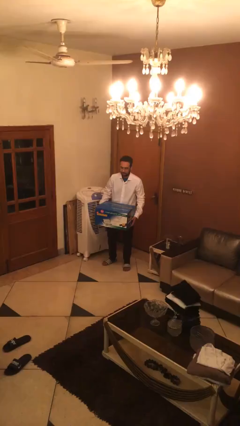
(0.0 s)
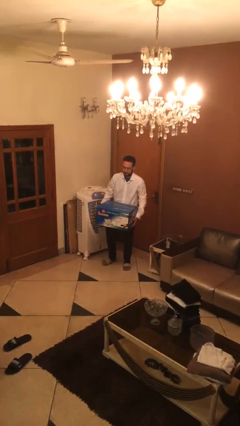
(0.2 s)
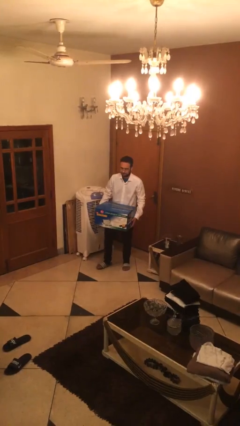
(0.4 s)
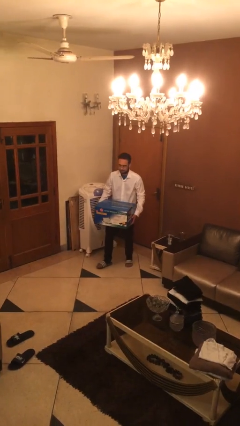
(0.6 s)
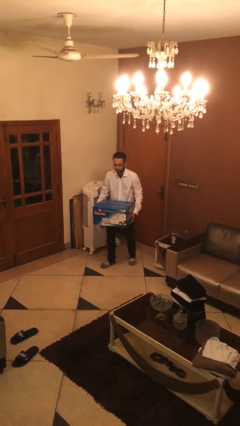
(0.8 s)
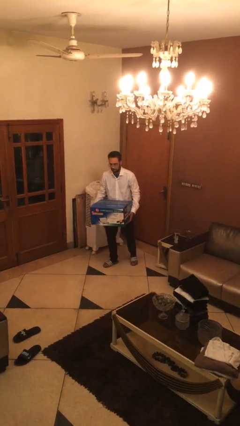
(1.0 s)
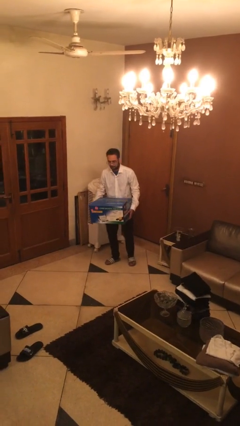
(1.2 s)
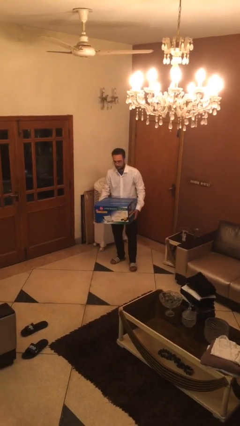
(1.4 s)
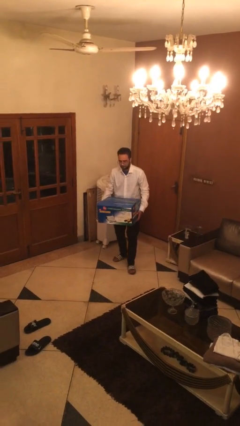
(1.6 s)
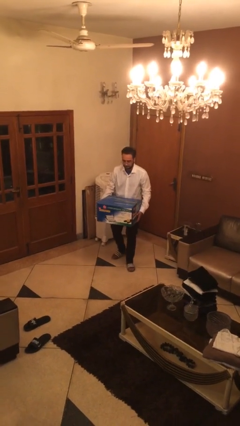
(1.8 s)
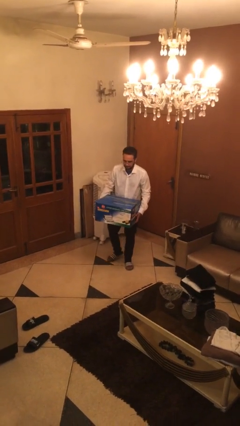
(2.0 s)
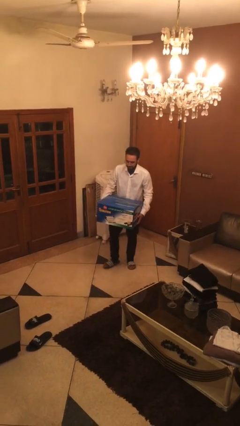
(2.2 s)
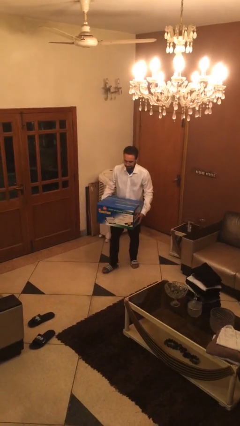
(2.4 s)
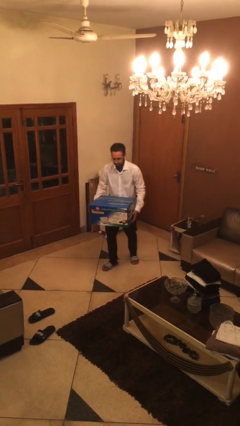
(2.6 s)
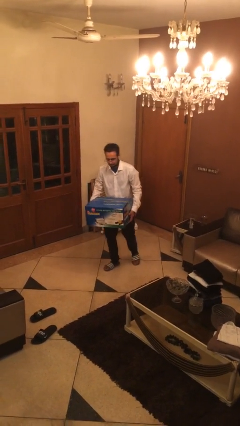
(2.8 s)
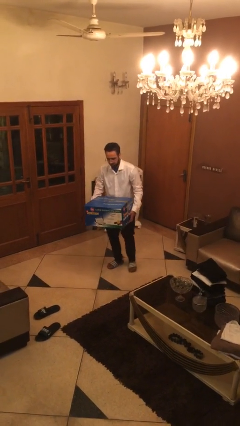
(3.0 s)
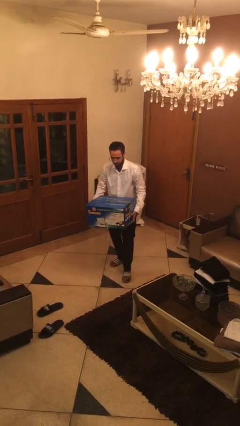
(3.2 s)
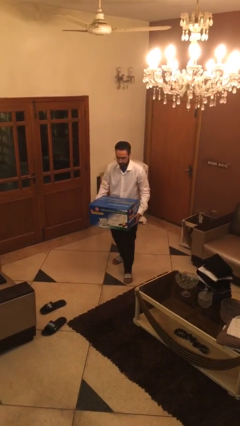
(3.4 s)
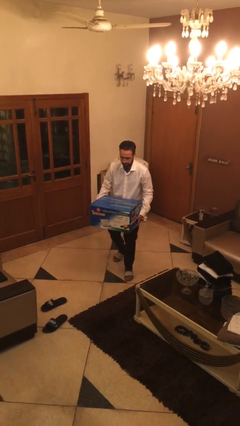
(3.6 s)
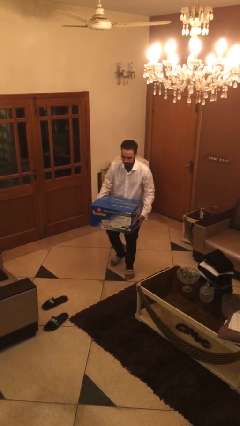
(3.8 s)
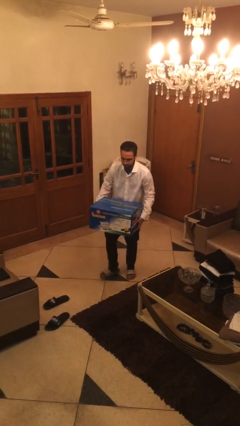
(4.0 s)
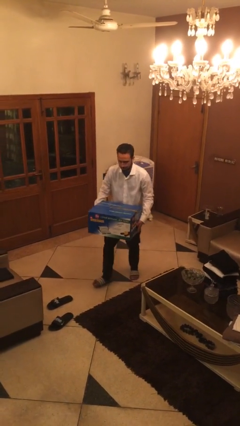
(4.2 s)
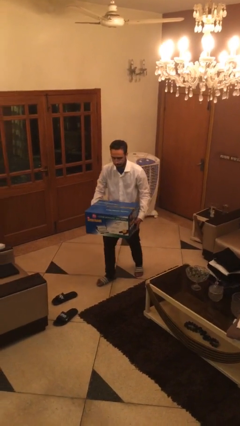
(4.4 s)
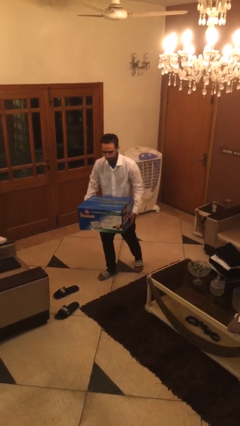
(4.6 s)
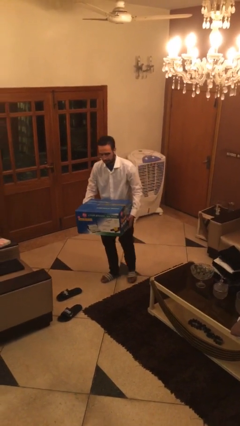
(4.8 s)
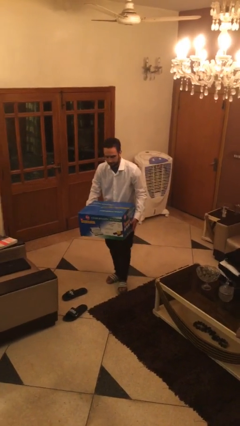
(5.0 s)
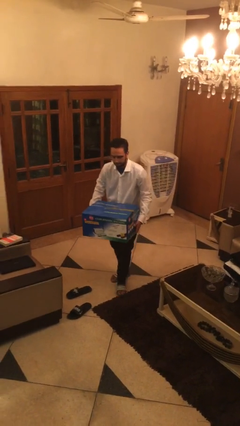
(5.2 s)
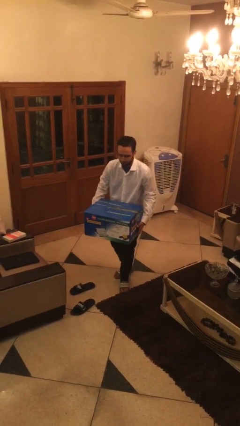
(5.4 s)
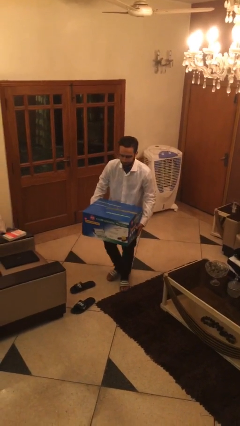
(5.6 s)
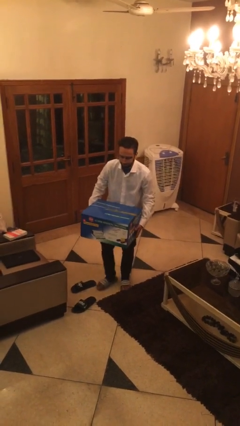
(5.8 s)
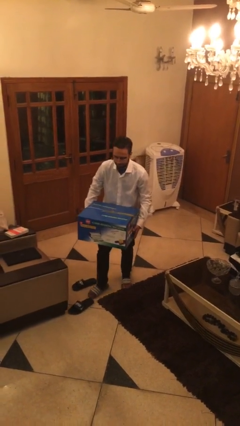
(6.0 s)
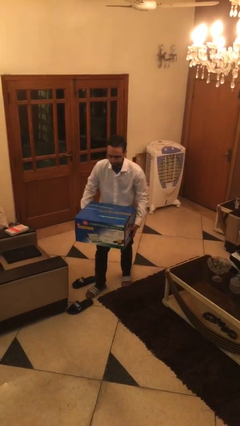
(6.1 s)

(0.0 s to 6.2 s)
person carries heavy object

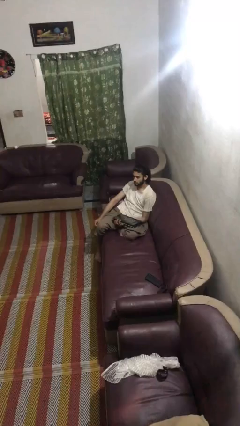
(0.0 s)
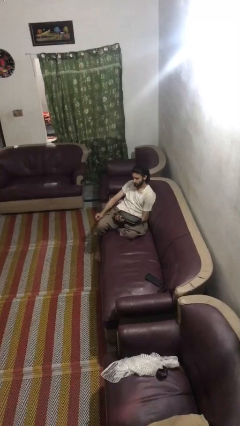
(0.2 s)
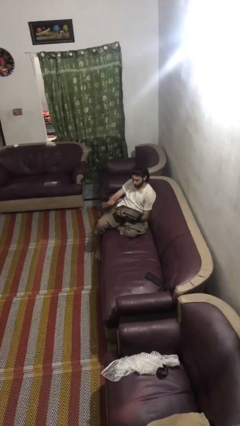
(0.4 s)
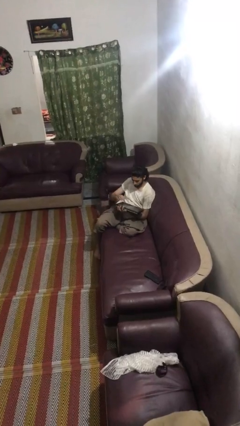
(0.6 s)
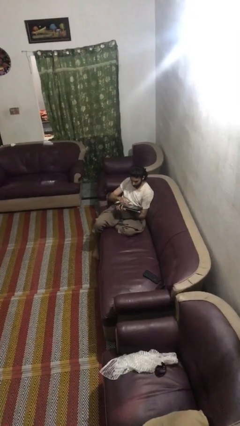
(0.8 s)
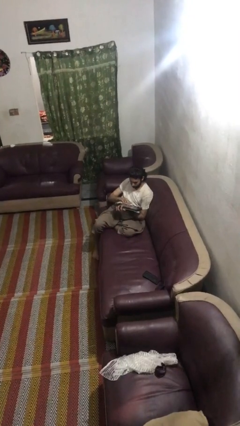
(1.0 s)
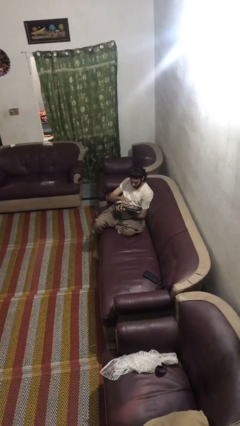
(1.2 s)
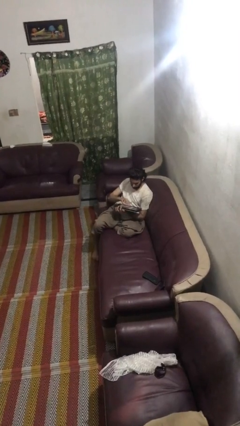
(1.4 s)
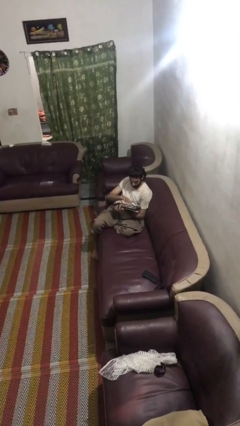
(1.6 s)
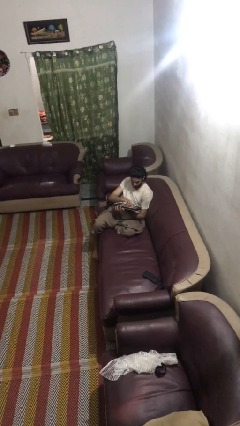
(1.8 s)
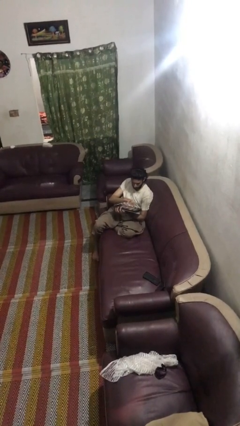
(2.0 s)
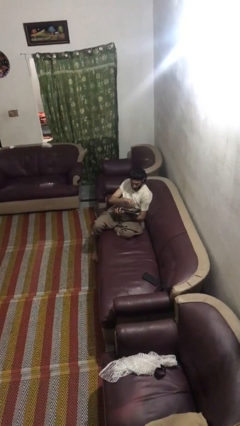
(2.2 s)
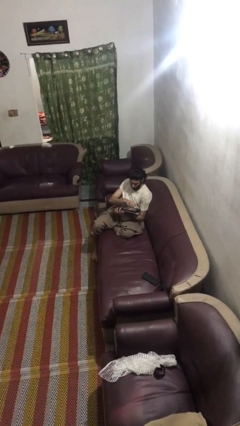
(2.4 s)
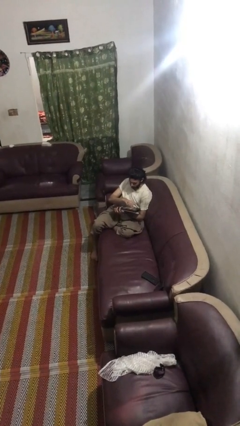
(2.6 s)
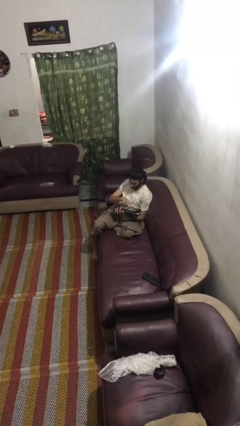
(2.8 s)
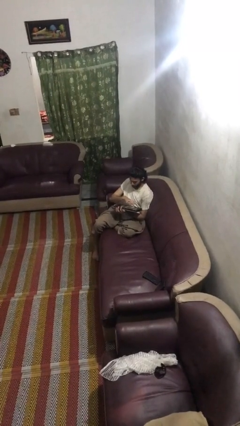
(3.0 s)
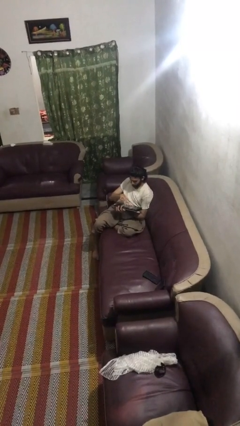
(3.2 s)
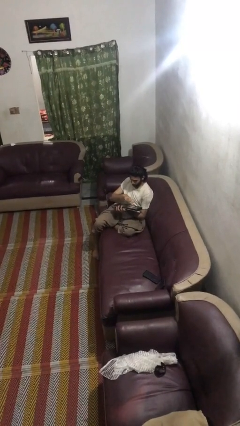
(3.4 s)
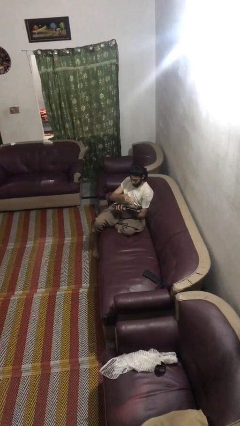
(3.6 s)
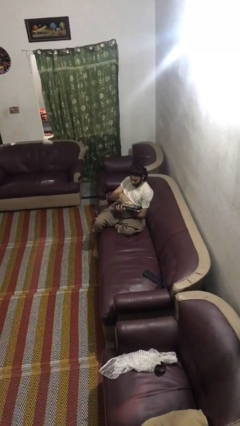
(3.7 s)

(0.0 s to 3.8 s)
person interacts with tablet

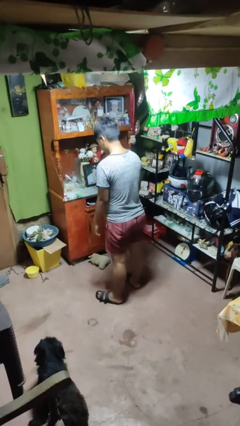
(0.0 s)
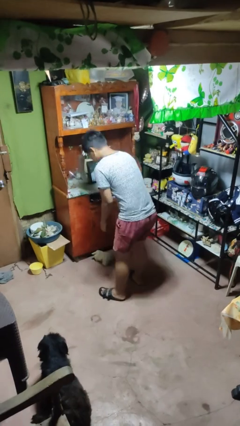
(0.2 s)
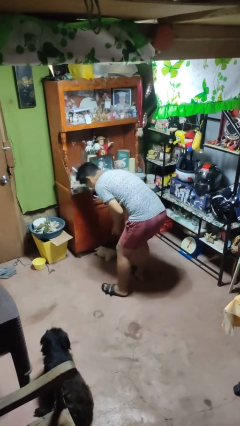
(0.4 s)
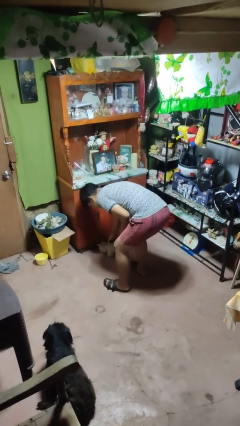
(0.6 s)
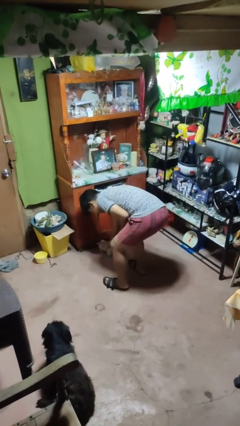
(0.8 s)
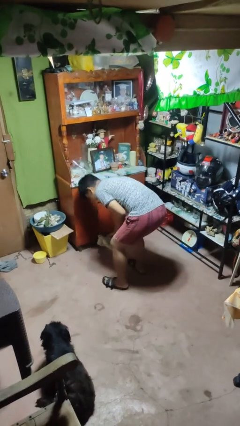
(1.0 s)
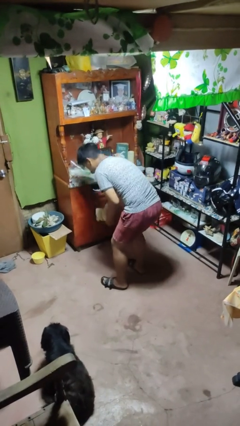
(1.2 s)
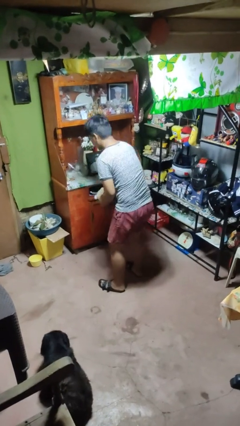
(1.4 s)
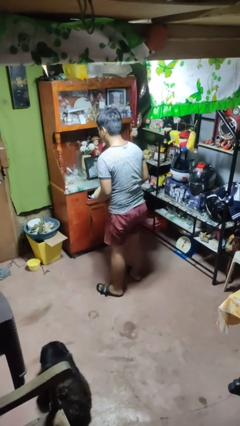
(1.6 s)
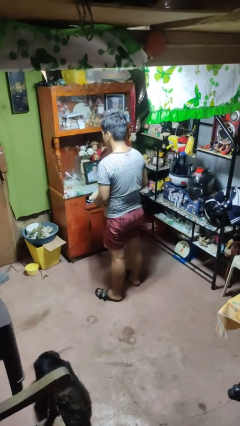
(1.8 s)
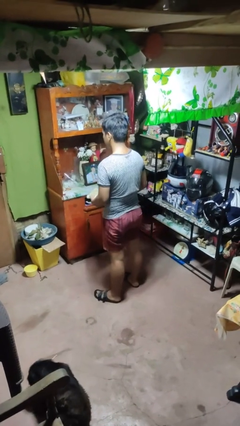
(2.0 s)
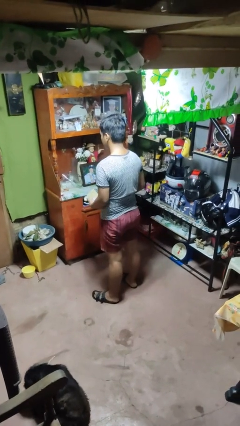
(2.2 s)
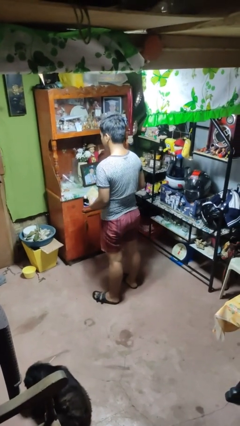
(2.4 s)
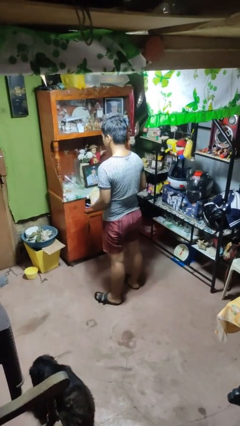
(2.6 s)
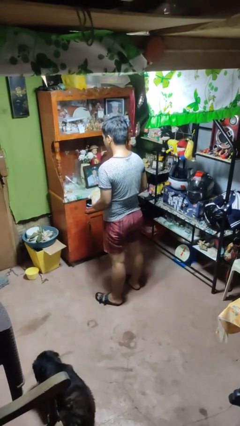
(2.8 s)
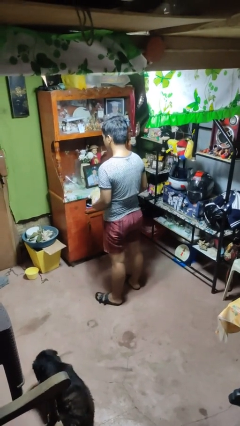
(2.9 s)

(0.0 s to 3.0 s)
person picks up object from floor

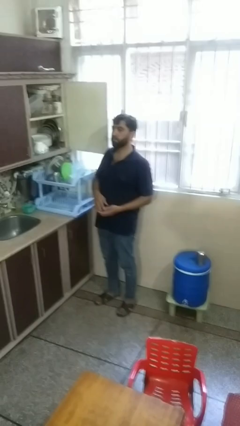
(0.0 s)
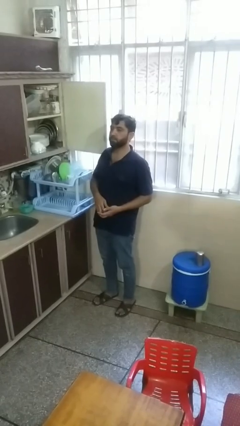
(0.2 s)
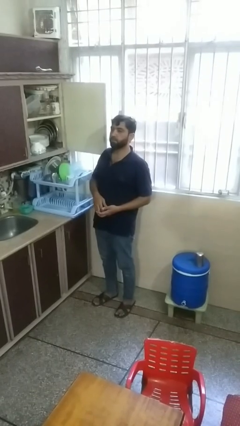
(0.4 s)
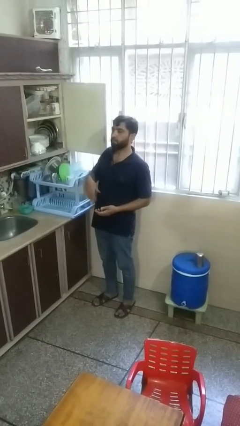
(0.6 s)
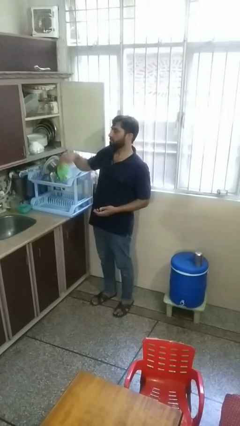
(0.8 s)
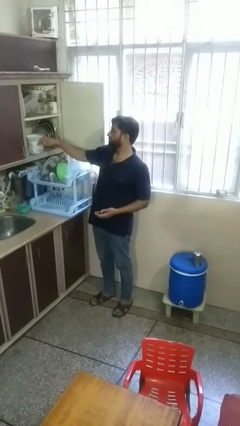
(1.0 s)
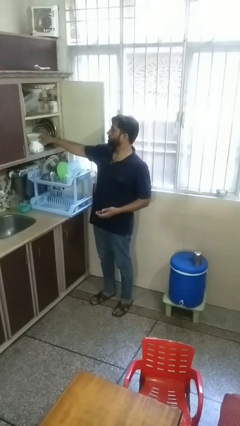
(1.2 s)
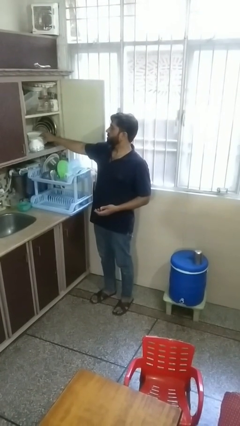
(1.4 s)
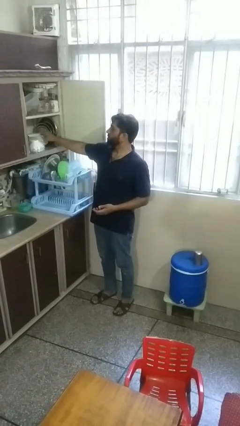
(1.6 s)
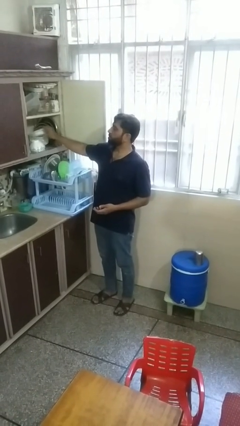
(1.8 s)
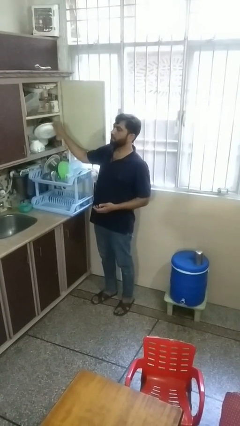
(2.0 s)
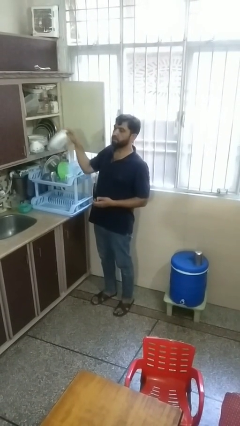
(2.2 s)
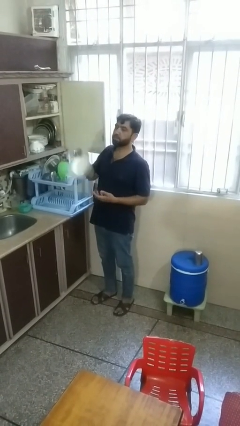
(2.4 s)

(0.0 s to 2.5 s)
person takes object from cabinet

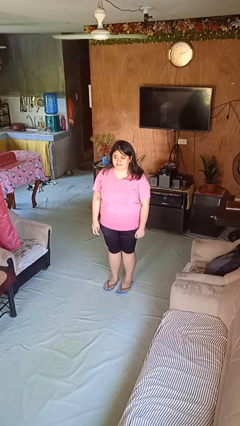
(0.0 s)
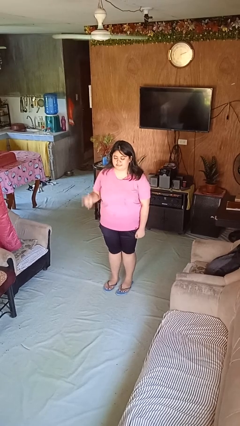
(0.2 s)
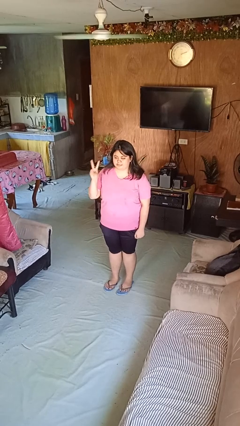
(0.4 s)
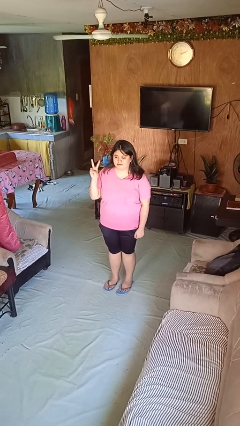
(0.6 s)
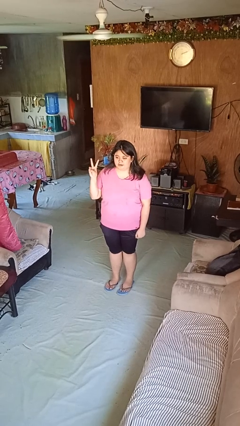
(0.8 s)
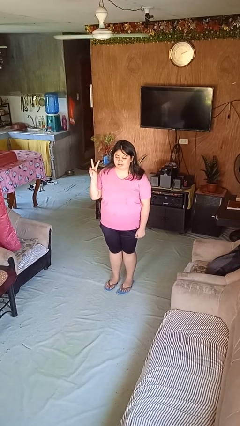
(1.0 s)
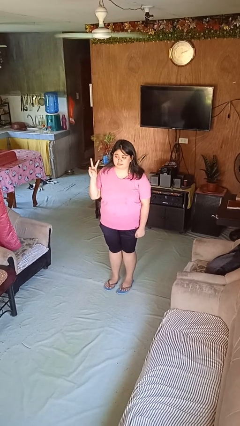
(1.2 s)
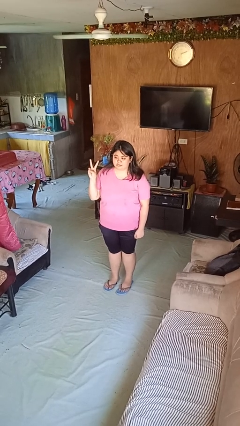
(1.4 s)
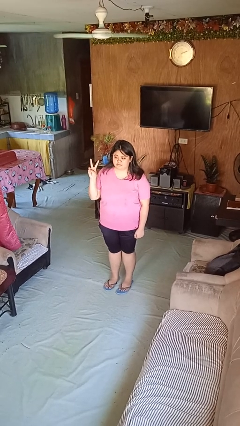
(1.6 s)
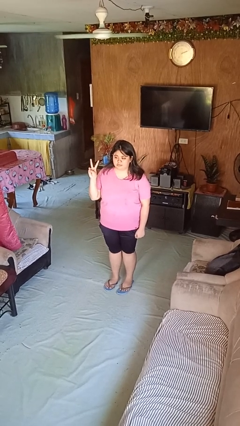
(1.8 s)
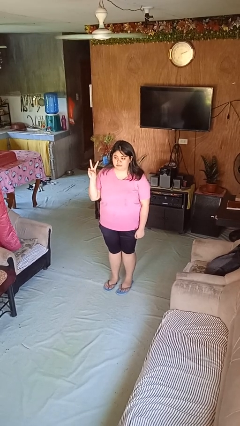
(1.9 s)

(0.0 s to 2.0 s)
person gestures peace

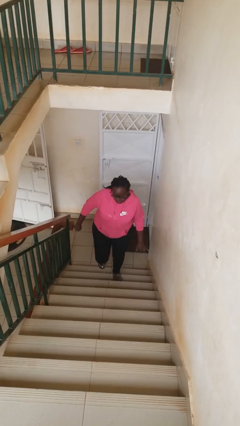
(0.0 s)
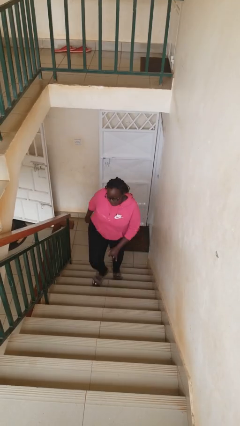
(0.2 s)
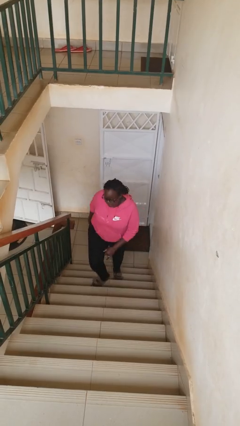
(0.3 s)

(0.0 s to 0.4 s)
person climbs down stairs
